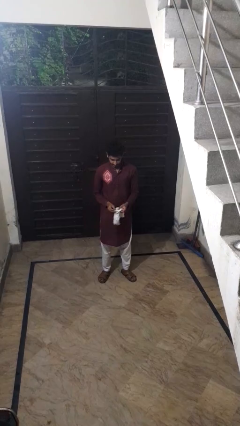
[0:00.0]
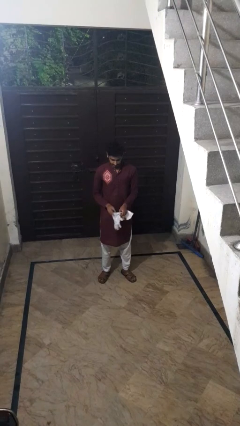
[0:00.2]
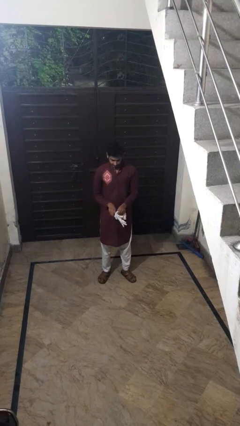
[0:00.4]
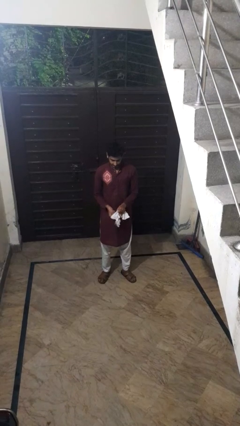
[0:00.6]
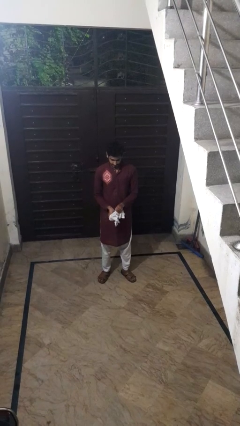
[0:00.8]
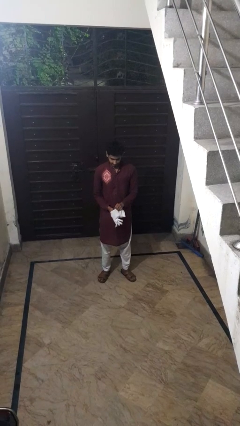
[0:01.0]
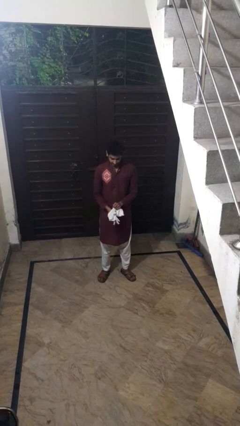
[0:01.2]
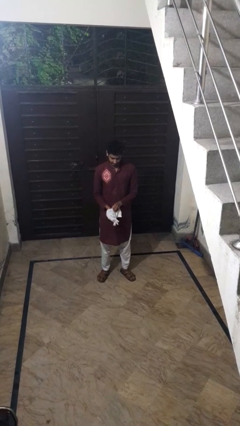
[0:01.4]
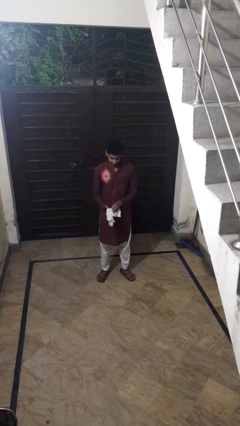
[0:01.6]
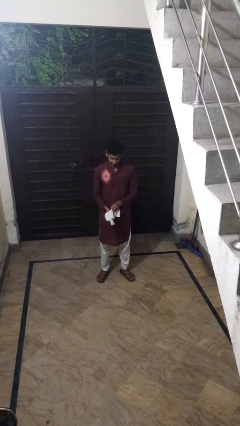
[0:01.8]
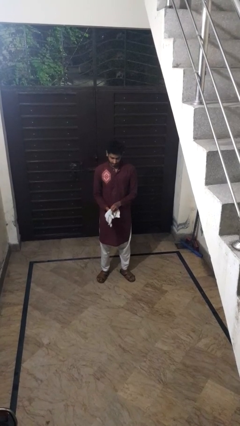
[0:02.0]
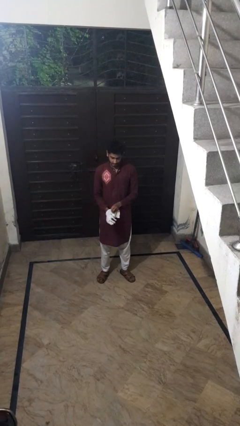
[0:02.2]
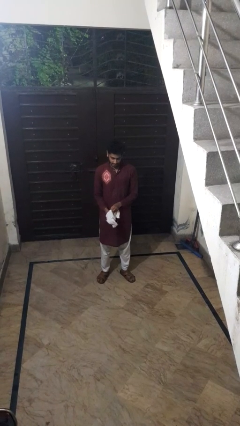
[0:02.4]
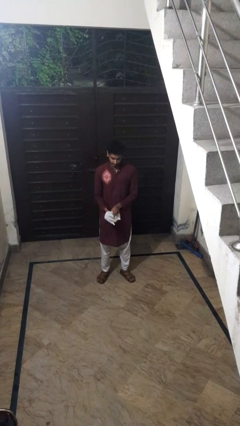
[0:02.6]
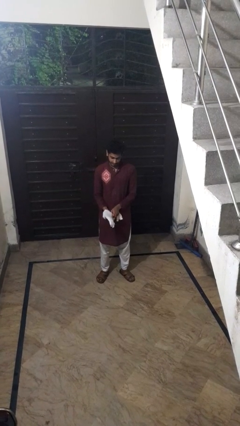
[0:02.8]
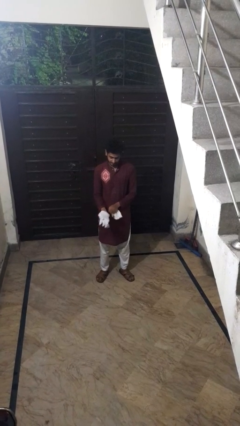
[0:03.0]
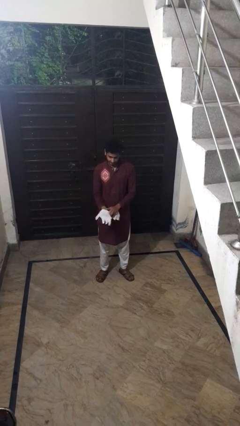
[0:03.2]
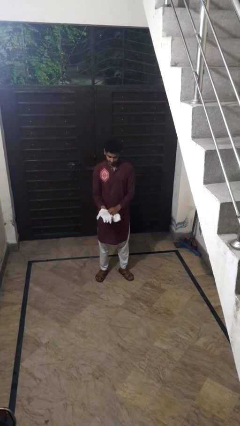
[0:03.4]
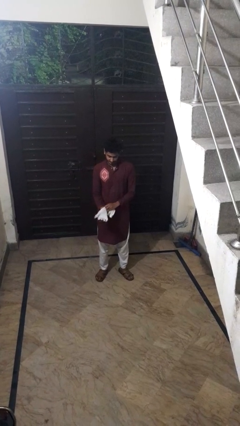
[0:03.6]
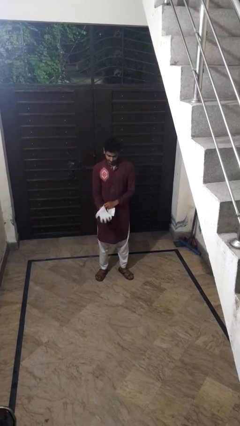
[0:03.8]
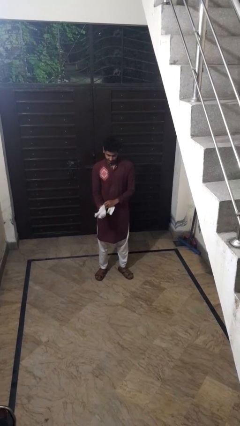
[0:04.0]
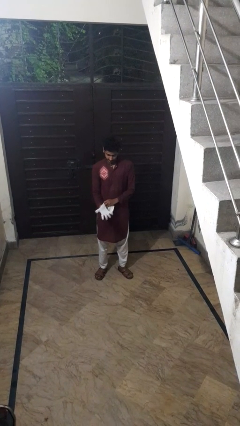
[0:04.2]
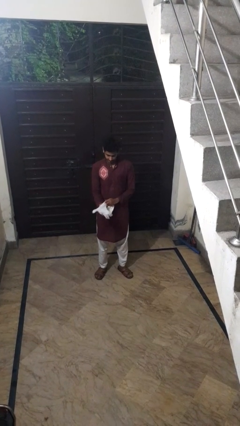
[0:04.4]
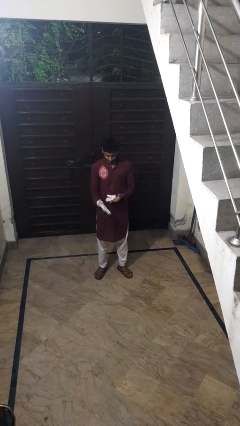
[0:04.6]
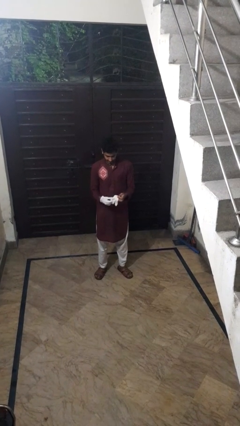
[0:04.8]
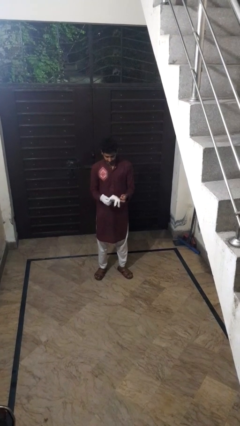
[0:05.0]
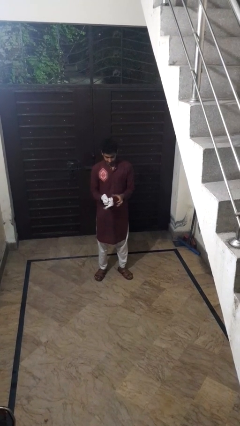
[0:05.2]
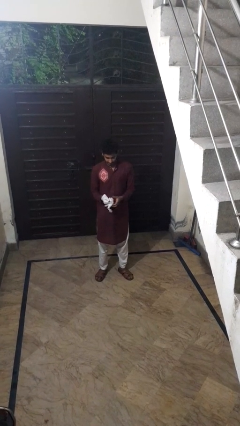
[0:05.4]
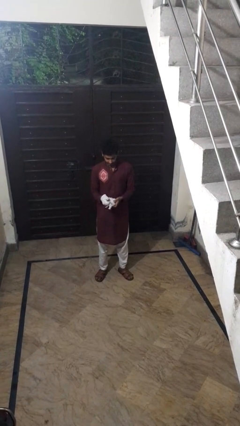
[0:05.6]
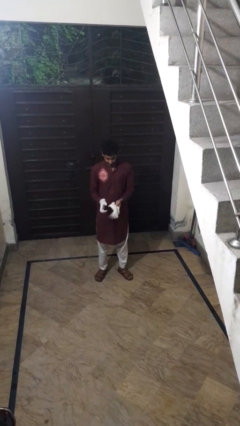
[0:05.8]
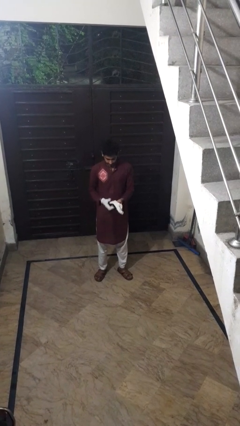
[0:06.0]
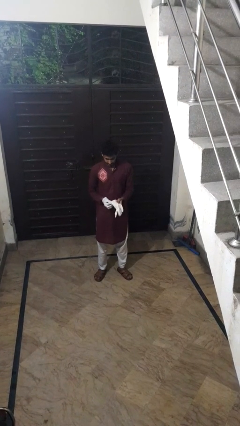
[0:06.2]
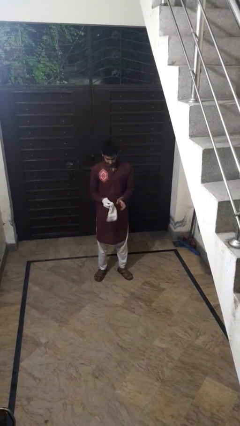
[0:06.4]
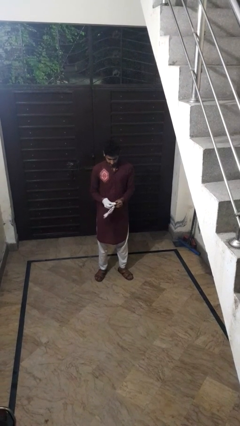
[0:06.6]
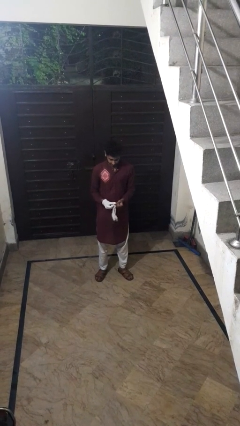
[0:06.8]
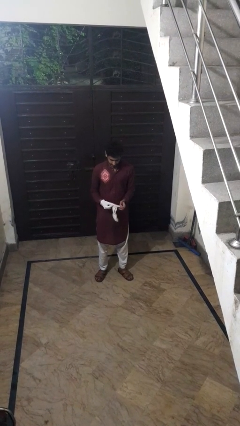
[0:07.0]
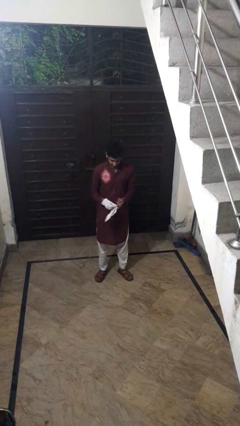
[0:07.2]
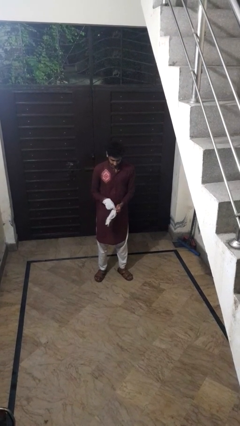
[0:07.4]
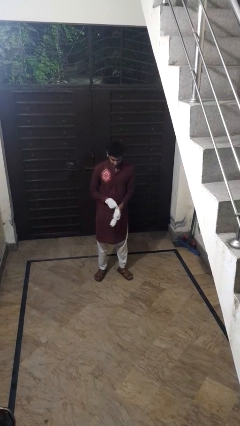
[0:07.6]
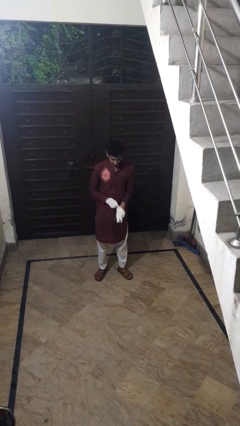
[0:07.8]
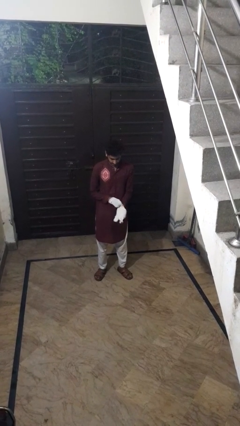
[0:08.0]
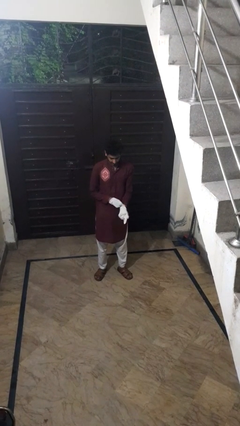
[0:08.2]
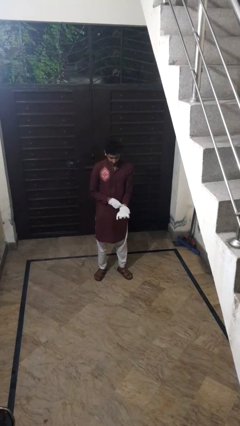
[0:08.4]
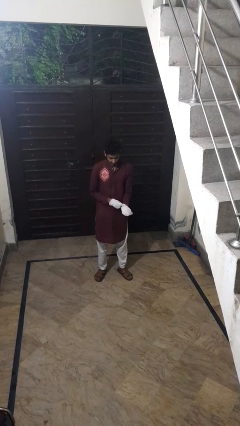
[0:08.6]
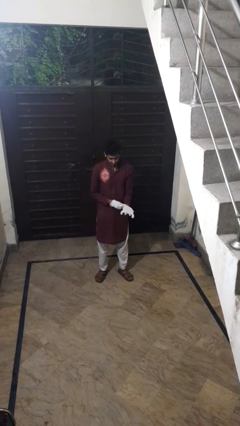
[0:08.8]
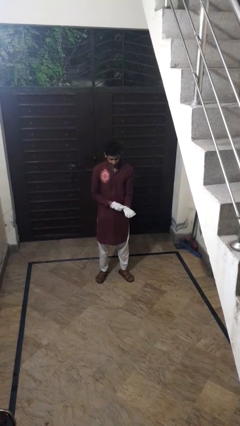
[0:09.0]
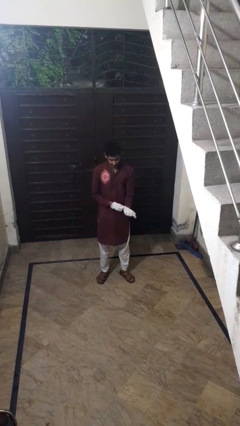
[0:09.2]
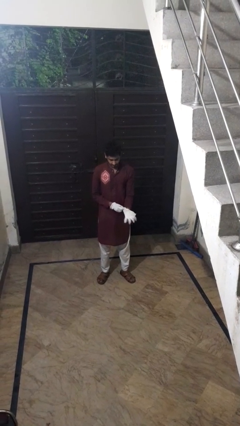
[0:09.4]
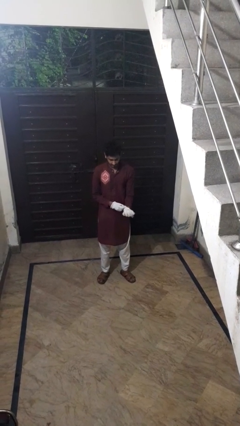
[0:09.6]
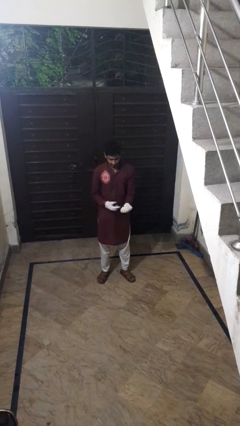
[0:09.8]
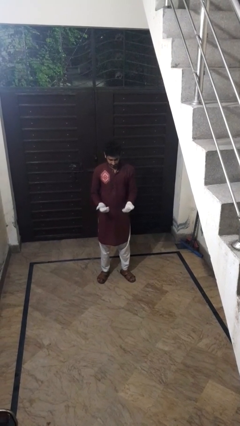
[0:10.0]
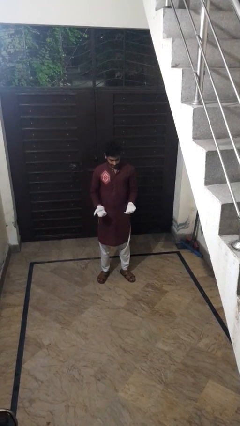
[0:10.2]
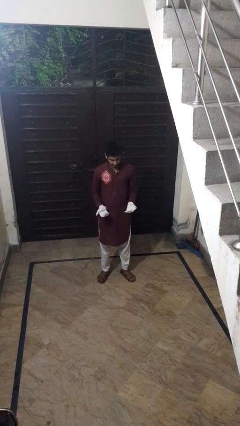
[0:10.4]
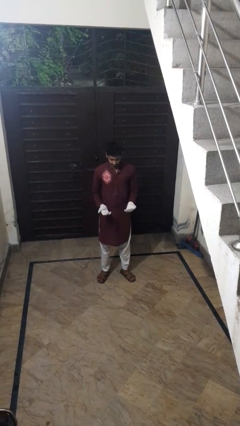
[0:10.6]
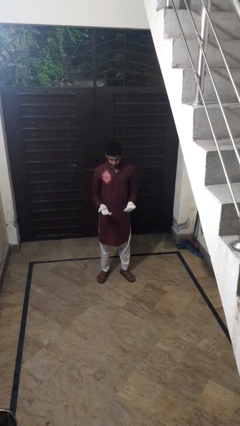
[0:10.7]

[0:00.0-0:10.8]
person puts on gloves

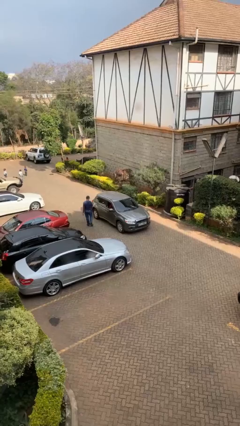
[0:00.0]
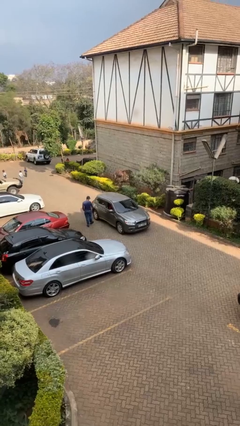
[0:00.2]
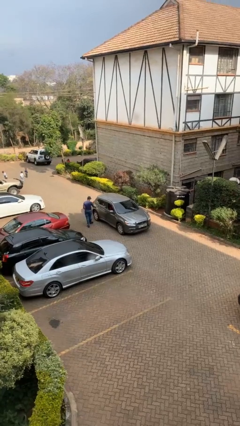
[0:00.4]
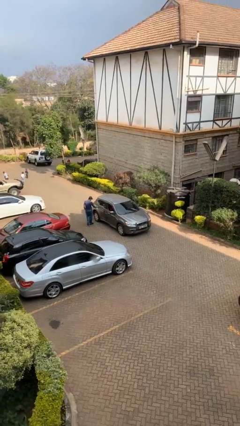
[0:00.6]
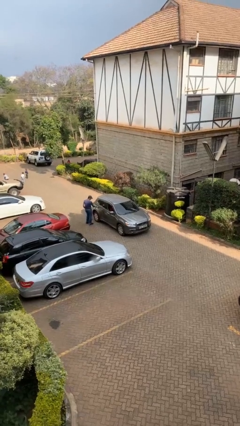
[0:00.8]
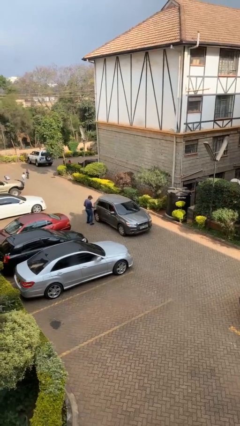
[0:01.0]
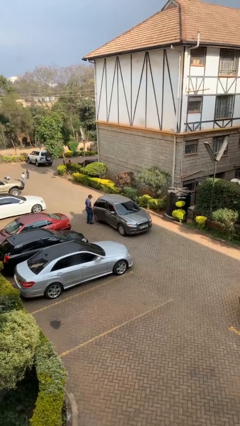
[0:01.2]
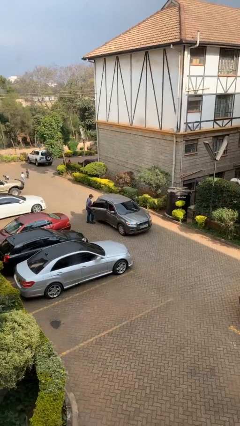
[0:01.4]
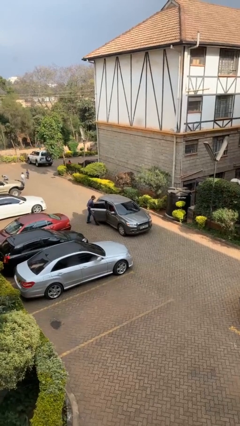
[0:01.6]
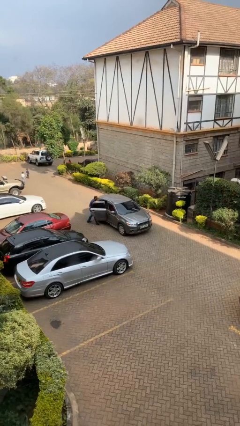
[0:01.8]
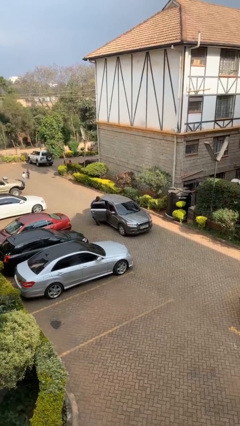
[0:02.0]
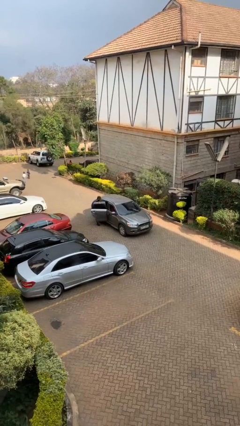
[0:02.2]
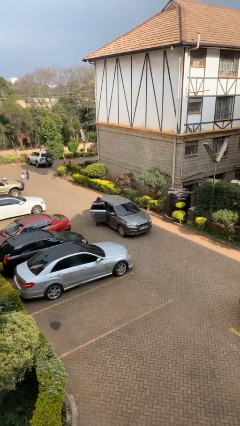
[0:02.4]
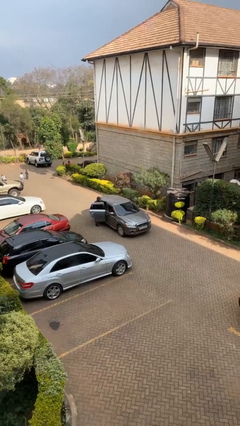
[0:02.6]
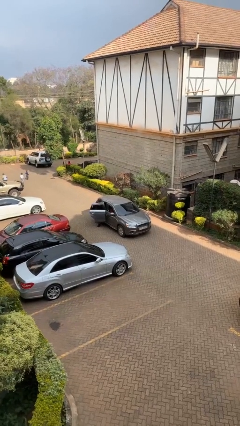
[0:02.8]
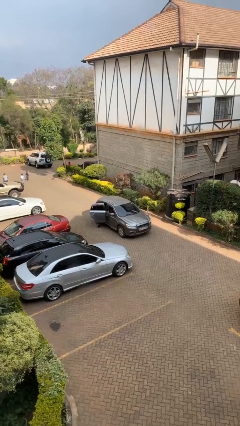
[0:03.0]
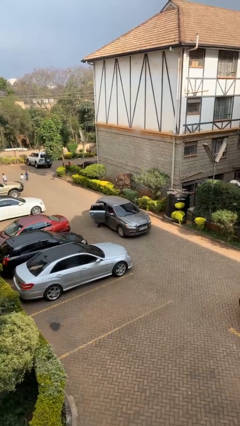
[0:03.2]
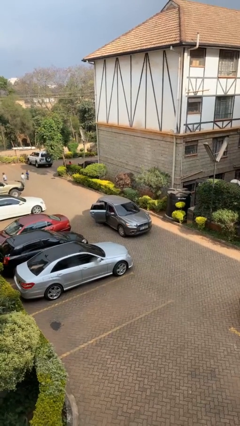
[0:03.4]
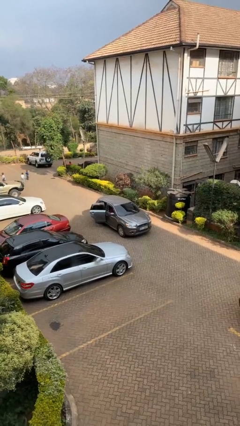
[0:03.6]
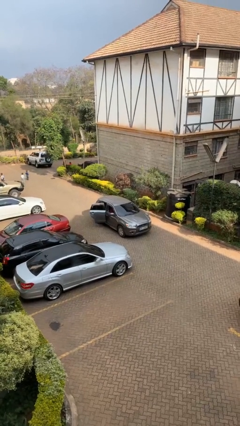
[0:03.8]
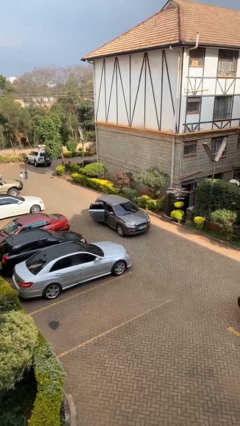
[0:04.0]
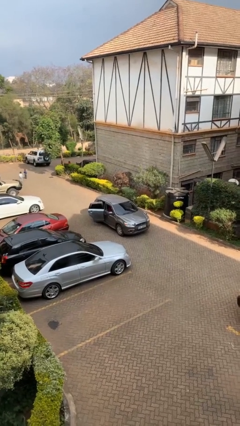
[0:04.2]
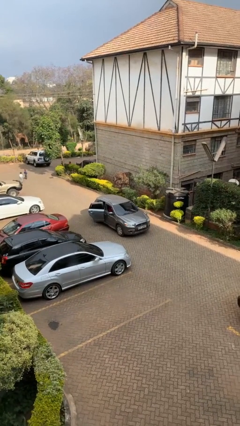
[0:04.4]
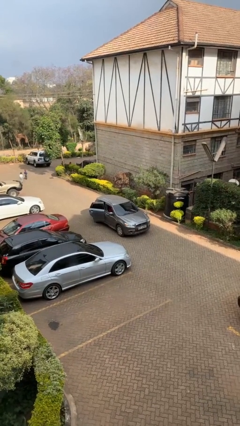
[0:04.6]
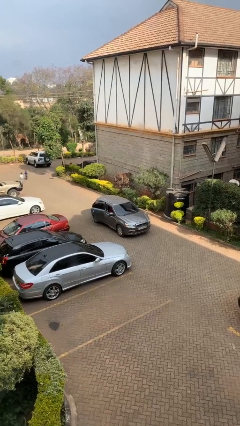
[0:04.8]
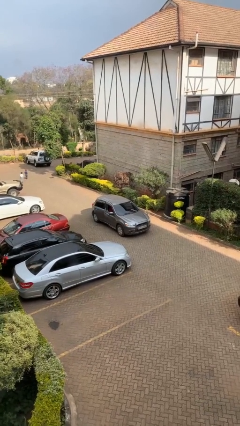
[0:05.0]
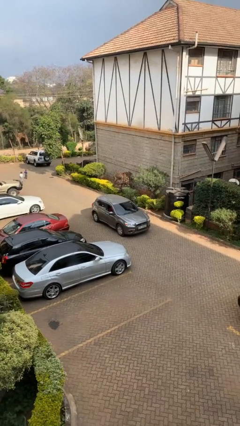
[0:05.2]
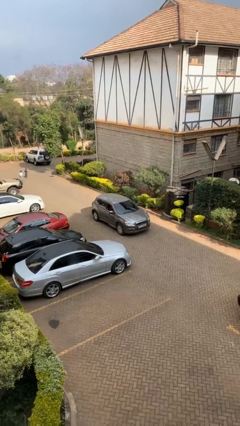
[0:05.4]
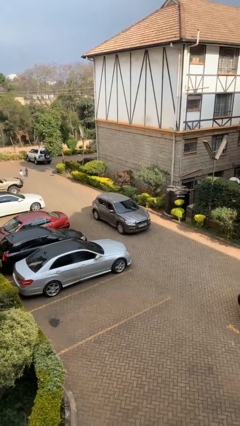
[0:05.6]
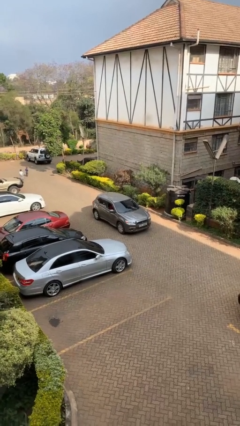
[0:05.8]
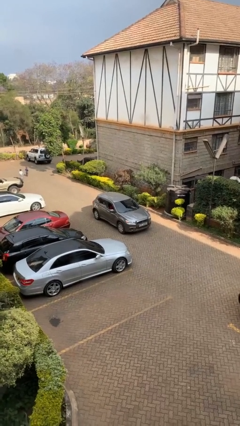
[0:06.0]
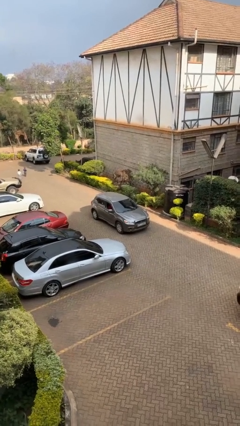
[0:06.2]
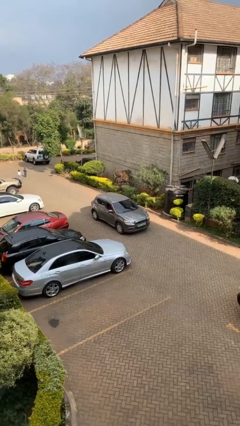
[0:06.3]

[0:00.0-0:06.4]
car picks up person

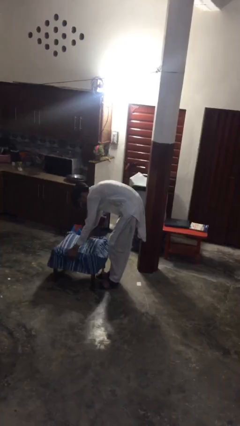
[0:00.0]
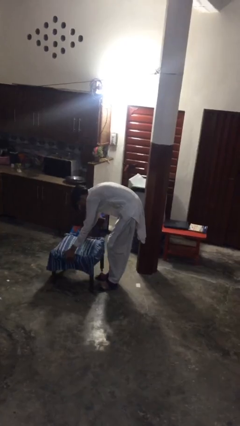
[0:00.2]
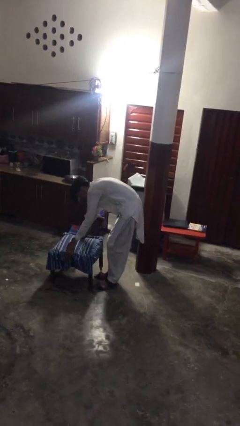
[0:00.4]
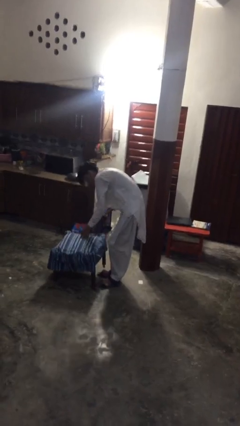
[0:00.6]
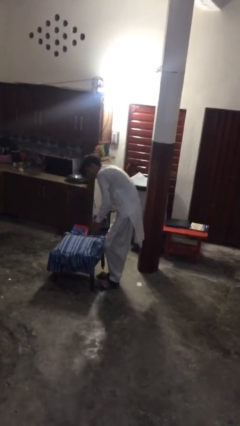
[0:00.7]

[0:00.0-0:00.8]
person picks up object from floor
